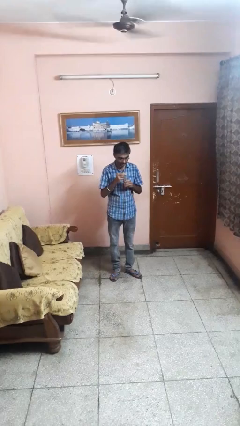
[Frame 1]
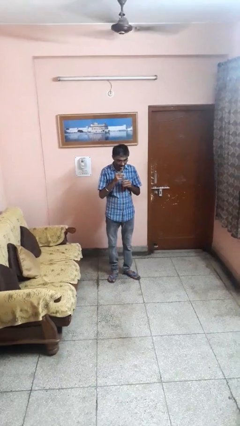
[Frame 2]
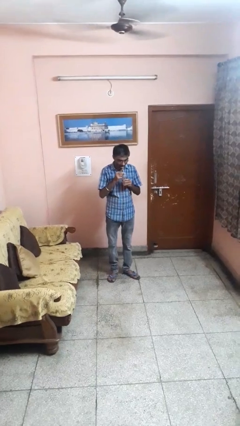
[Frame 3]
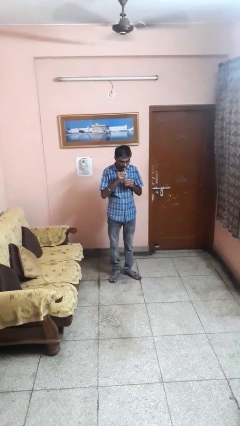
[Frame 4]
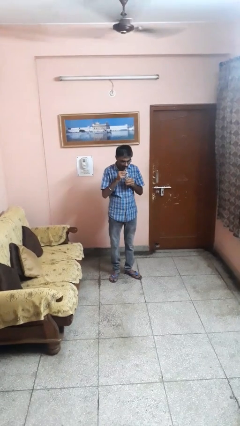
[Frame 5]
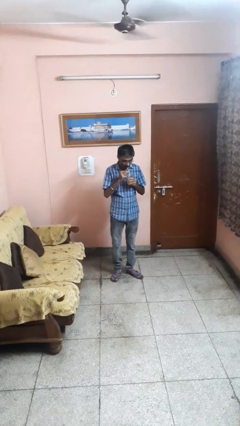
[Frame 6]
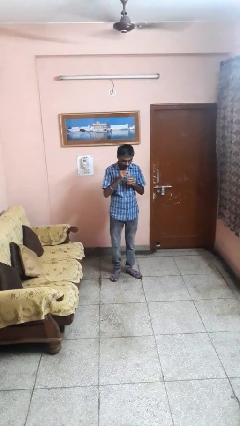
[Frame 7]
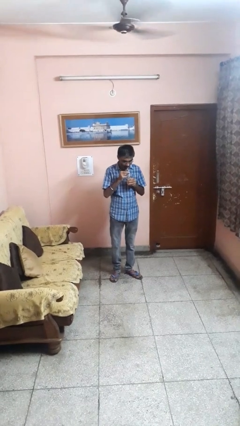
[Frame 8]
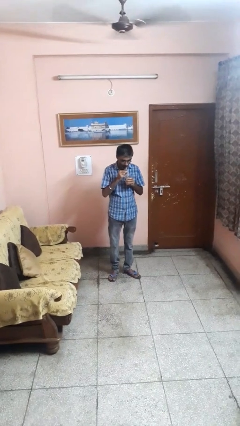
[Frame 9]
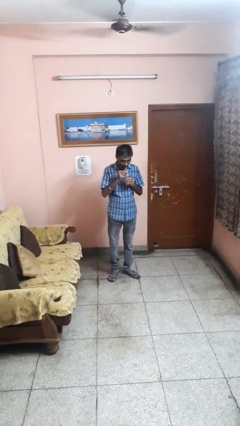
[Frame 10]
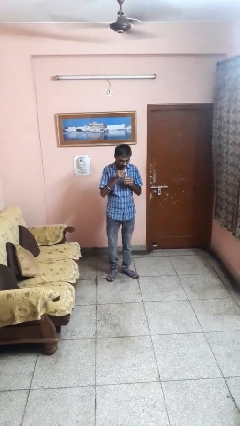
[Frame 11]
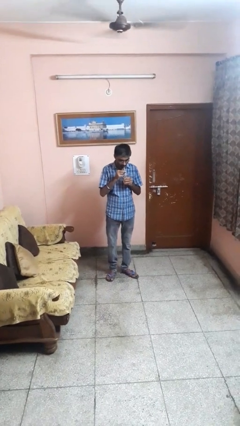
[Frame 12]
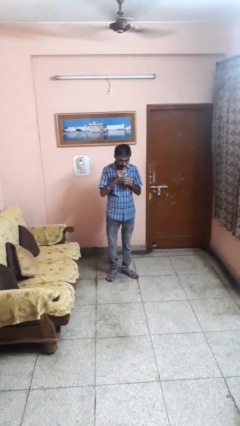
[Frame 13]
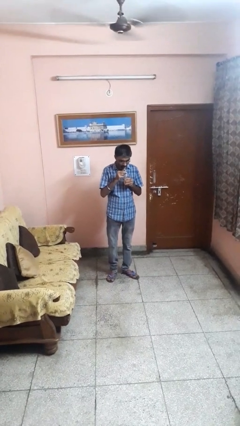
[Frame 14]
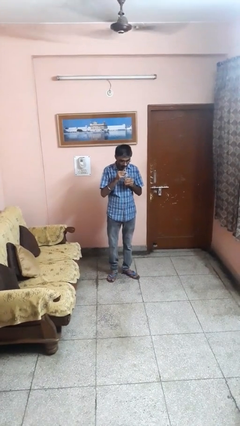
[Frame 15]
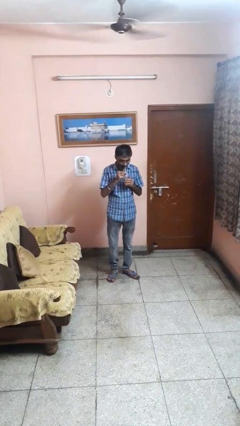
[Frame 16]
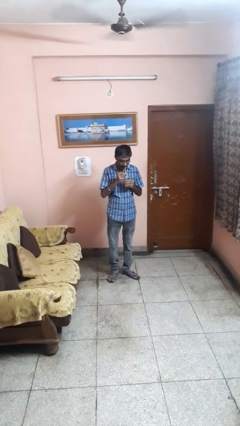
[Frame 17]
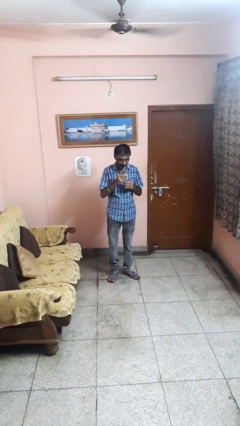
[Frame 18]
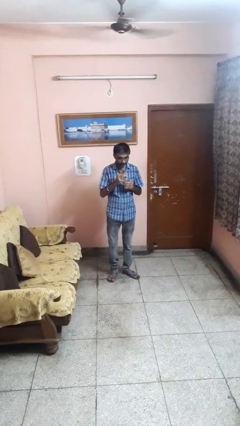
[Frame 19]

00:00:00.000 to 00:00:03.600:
person drinks from straw

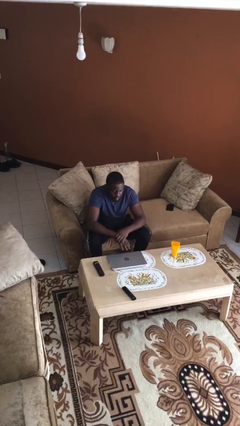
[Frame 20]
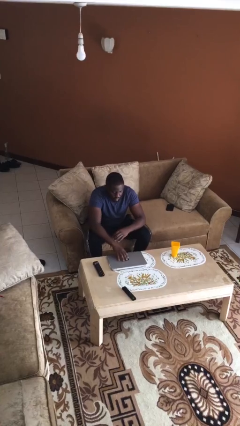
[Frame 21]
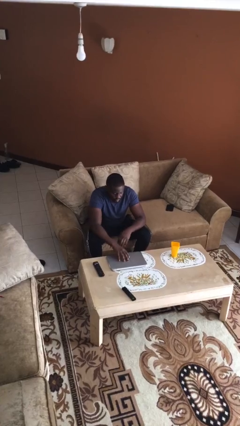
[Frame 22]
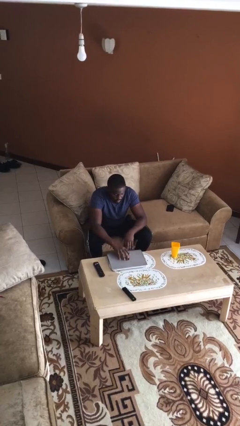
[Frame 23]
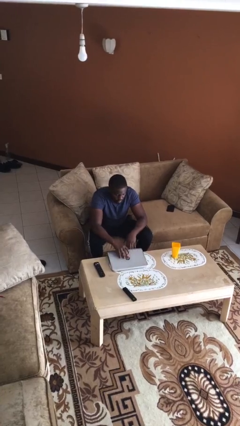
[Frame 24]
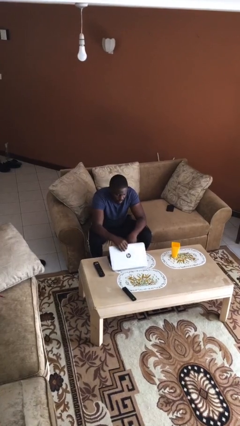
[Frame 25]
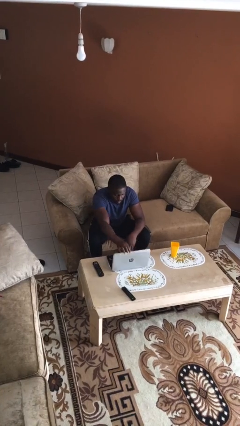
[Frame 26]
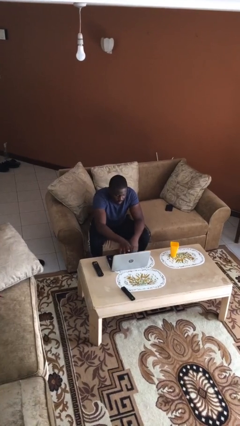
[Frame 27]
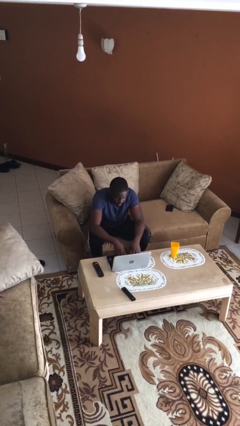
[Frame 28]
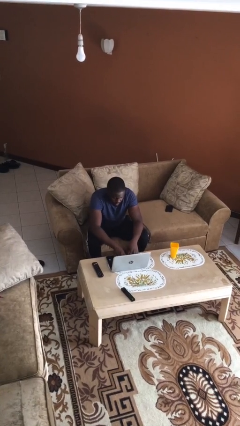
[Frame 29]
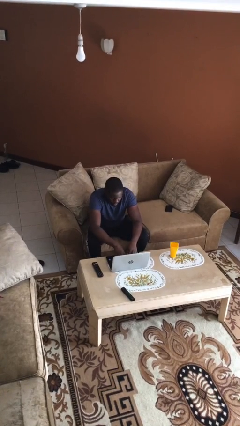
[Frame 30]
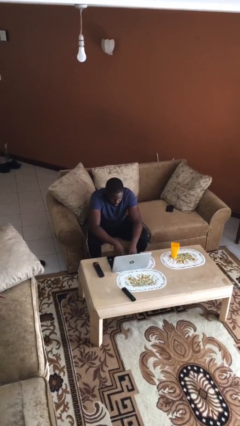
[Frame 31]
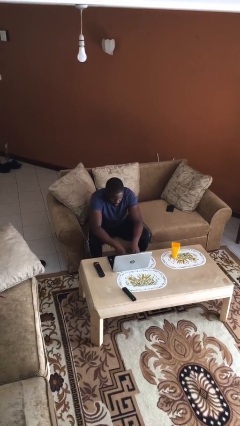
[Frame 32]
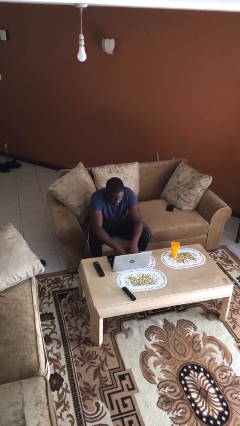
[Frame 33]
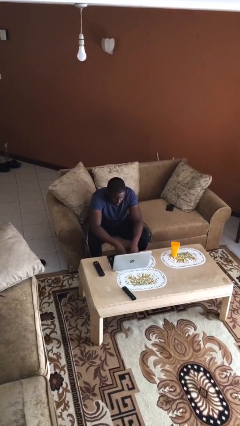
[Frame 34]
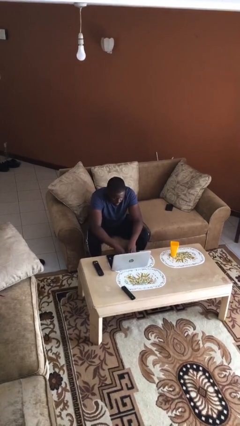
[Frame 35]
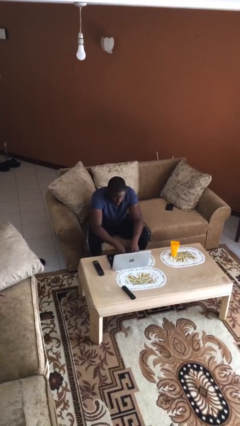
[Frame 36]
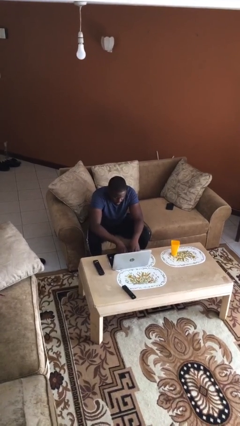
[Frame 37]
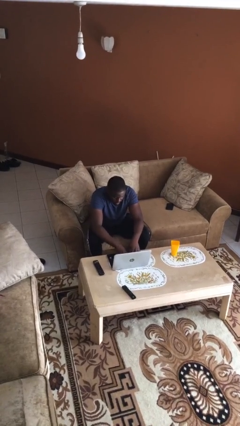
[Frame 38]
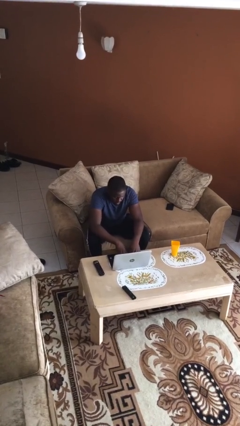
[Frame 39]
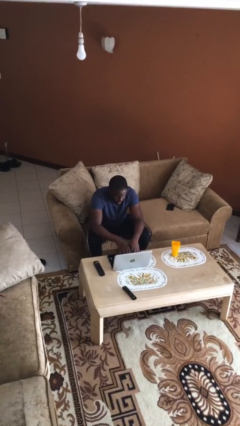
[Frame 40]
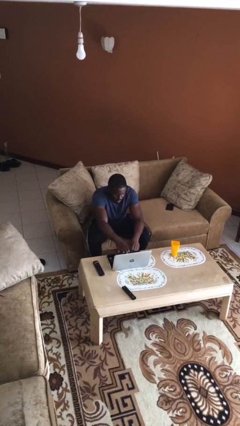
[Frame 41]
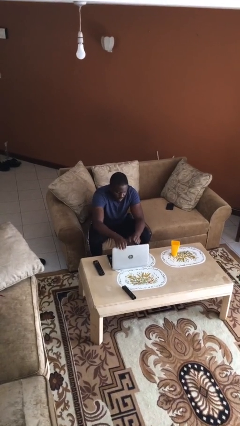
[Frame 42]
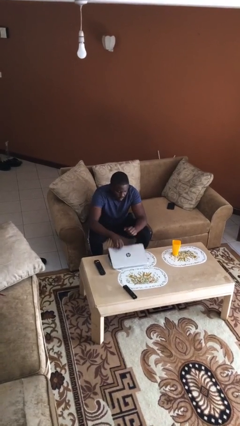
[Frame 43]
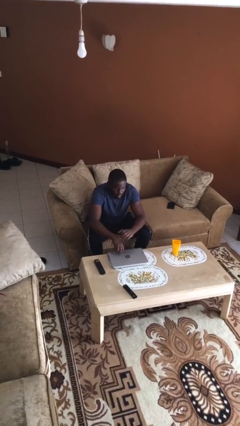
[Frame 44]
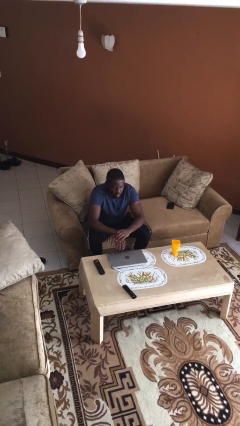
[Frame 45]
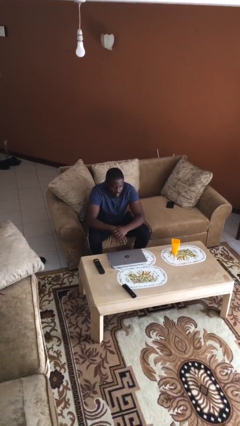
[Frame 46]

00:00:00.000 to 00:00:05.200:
person interacts with laptop

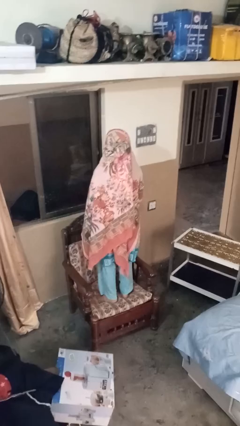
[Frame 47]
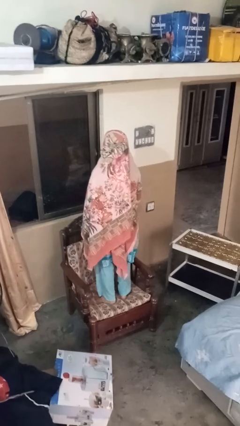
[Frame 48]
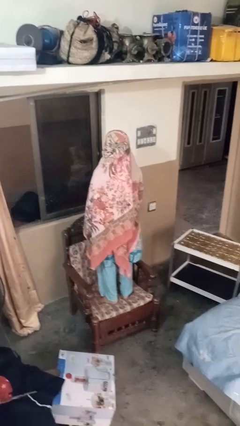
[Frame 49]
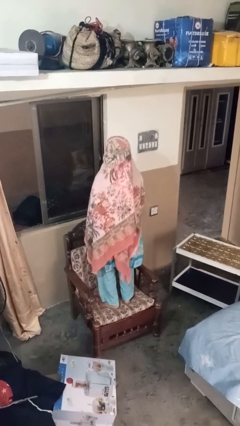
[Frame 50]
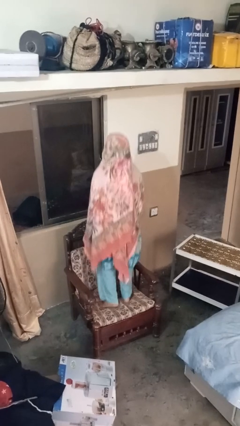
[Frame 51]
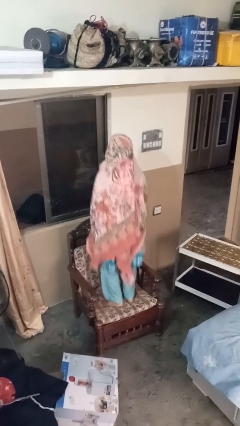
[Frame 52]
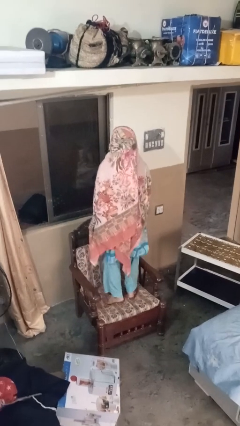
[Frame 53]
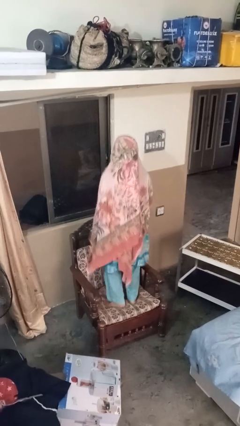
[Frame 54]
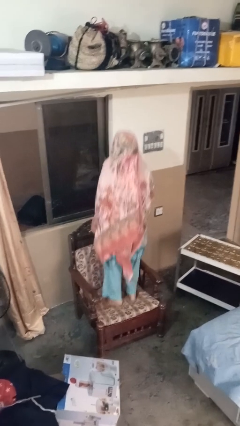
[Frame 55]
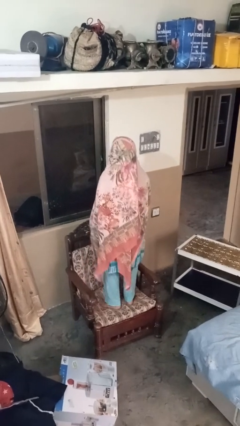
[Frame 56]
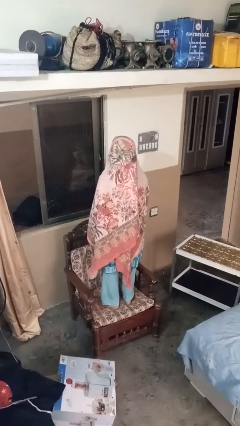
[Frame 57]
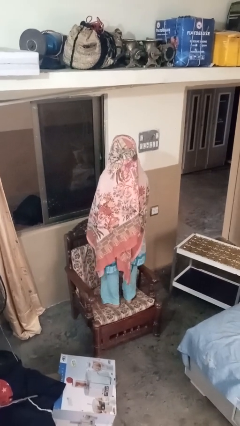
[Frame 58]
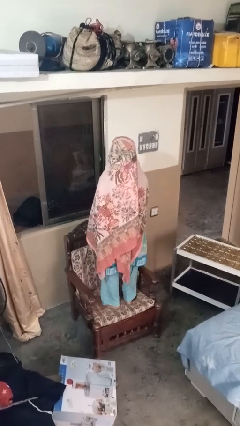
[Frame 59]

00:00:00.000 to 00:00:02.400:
person jumps on couch

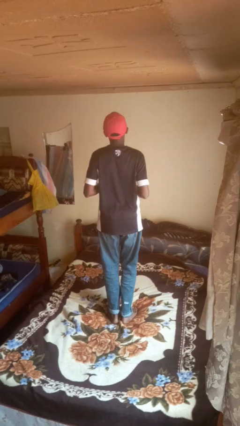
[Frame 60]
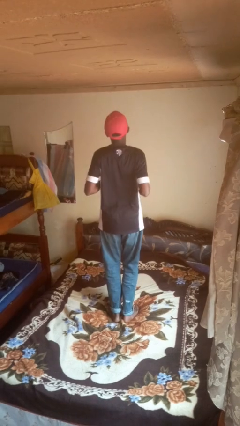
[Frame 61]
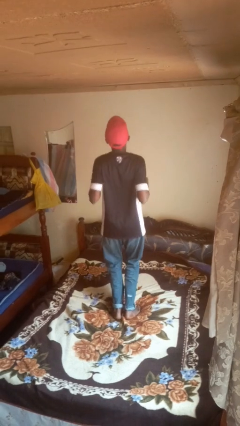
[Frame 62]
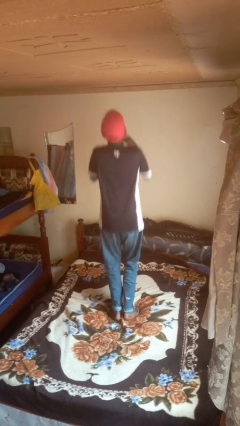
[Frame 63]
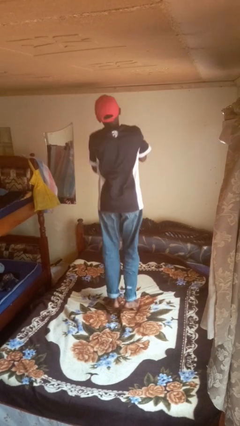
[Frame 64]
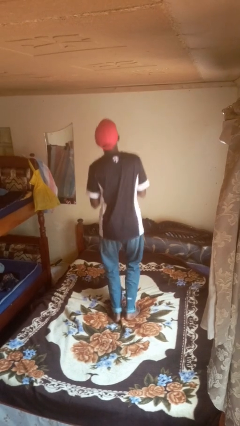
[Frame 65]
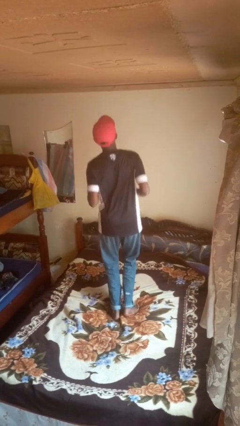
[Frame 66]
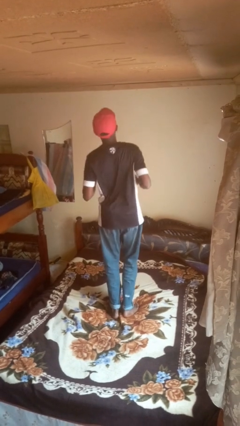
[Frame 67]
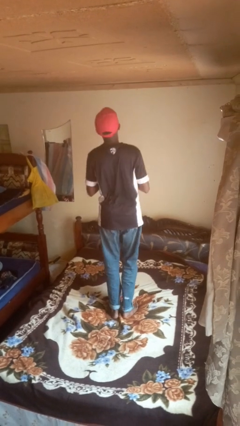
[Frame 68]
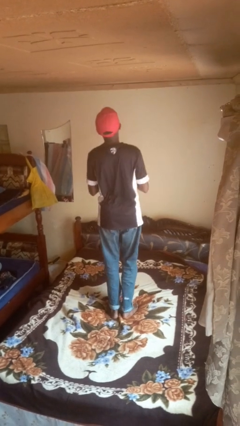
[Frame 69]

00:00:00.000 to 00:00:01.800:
person jumps on bed

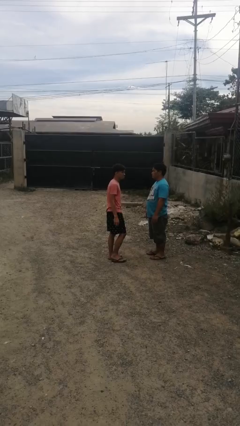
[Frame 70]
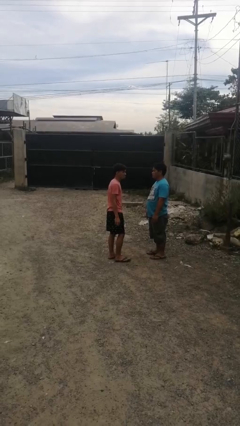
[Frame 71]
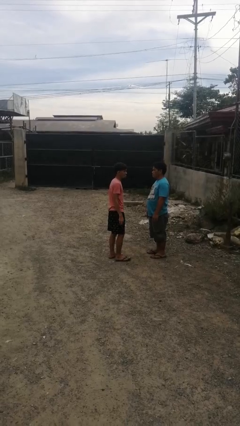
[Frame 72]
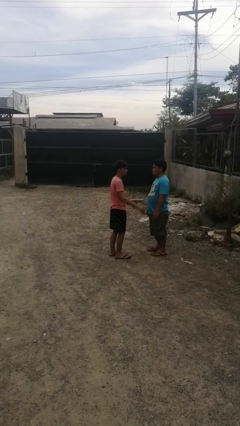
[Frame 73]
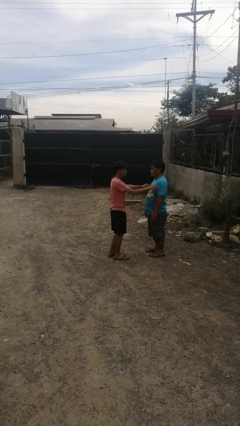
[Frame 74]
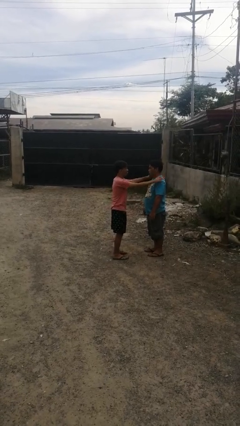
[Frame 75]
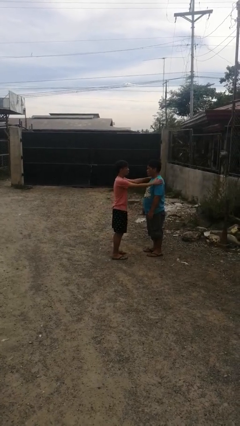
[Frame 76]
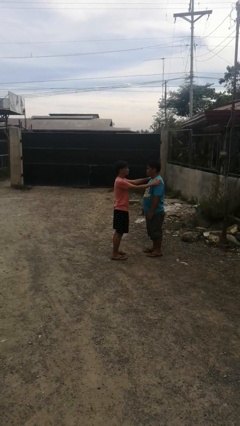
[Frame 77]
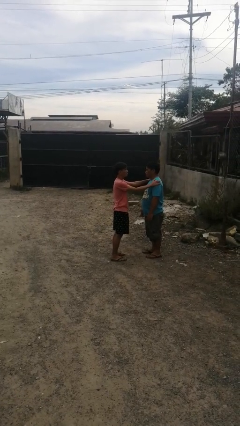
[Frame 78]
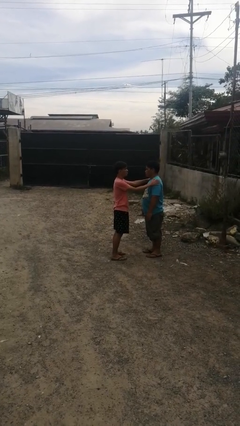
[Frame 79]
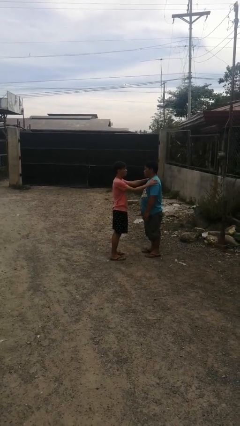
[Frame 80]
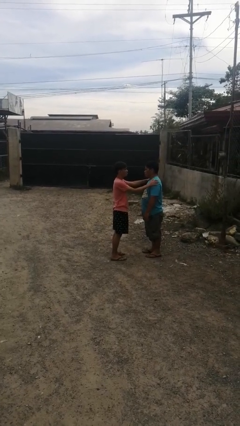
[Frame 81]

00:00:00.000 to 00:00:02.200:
person grabs person by shoulder

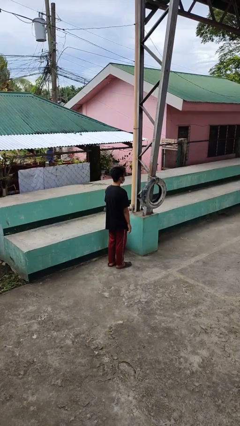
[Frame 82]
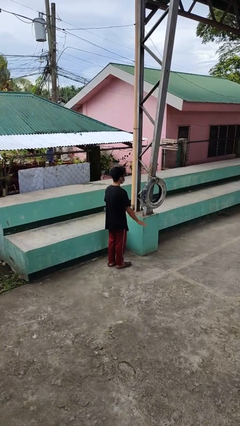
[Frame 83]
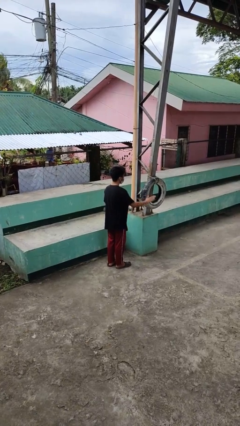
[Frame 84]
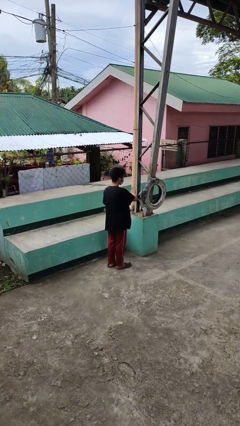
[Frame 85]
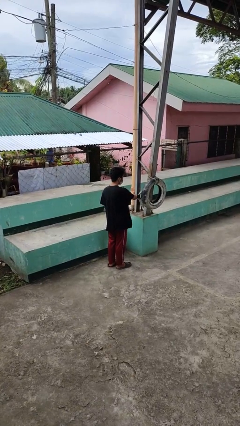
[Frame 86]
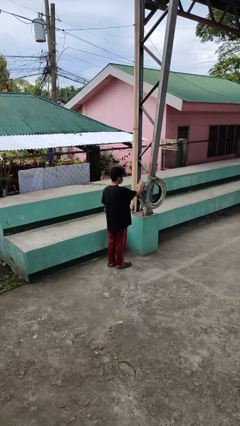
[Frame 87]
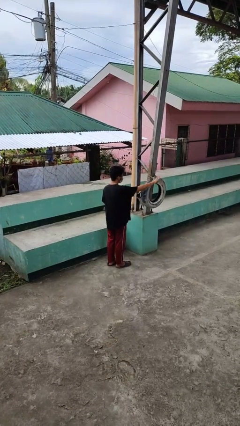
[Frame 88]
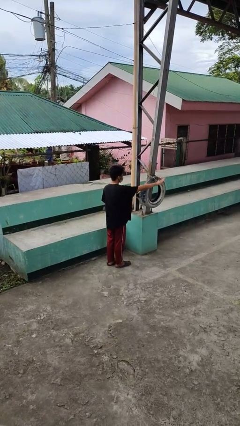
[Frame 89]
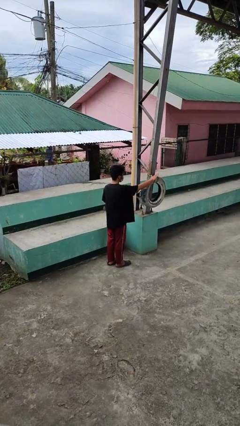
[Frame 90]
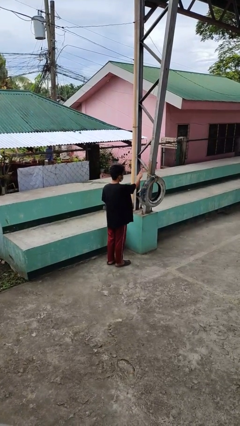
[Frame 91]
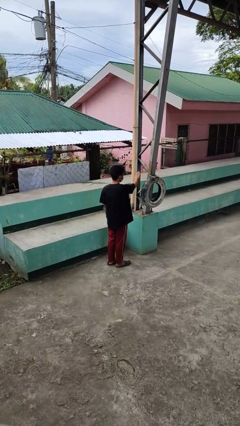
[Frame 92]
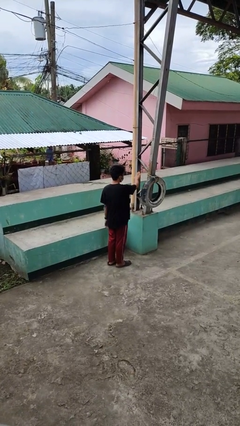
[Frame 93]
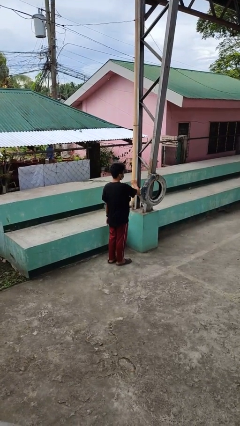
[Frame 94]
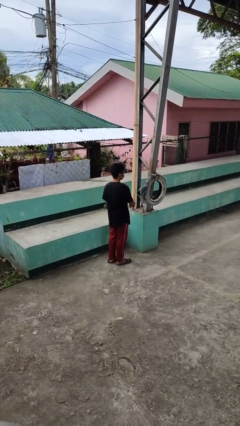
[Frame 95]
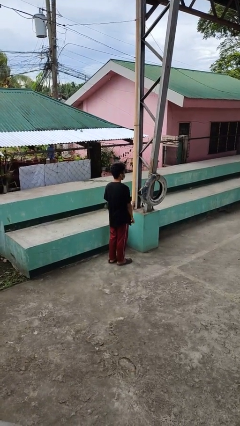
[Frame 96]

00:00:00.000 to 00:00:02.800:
person waves hand over object
